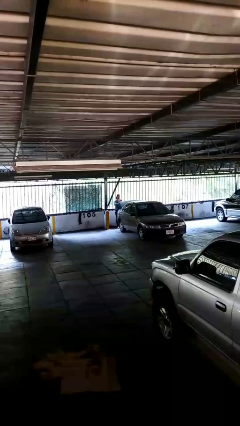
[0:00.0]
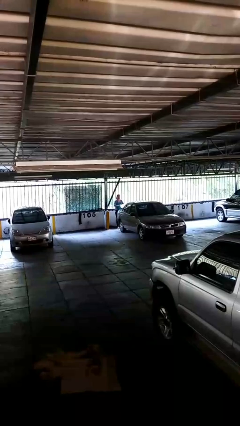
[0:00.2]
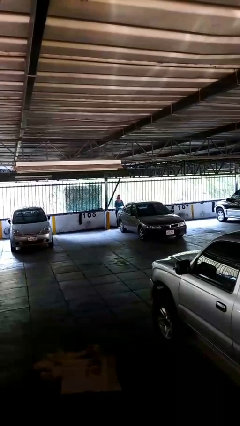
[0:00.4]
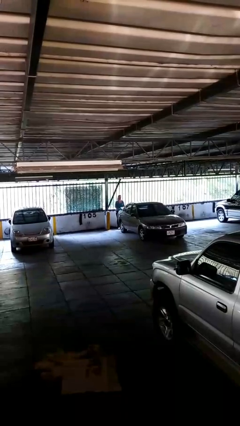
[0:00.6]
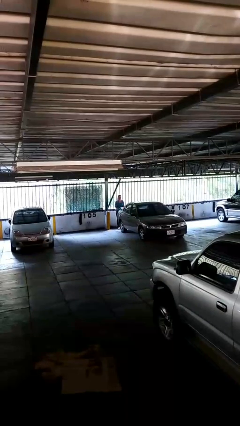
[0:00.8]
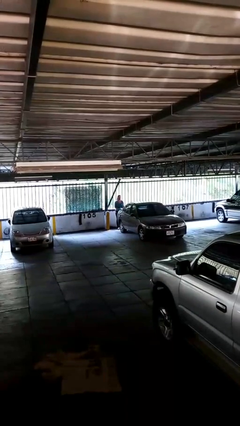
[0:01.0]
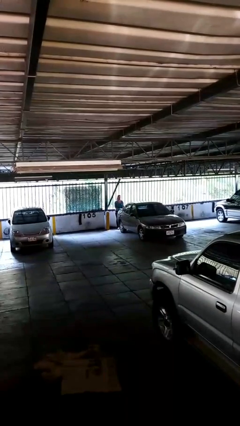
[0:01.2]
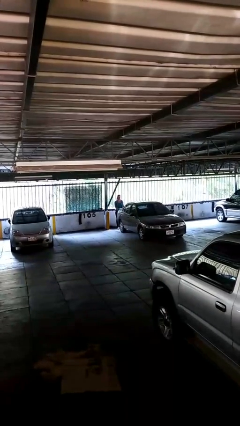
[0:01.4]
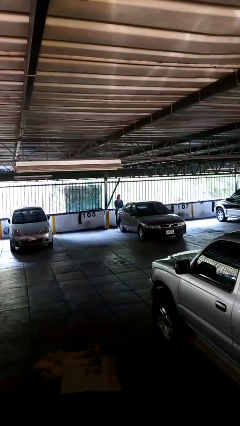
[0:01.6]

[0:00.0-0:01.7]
person closes car trunk

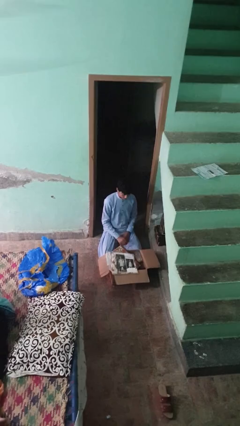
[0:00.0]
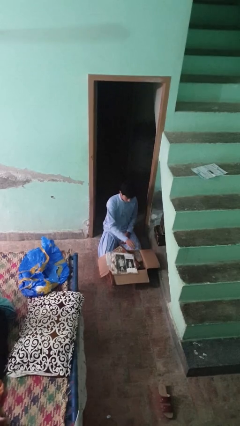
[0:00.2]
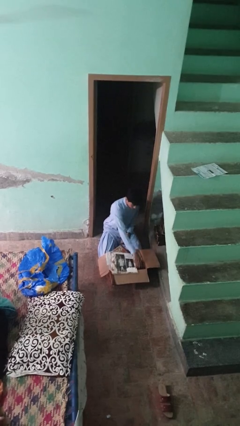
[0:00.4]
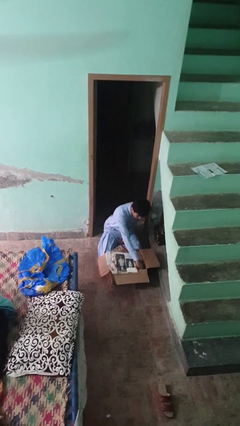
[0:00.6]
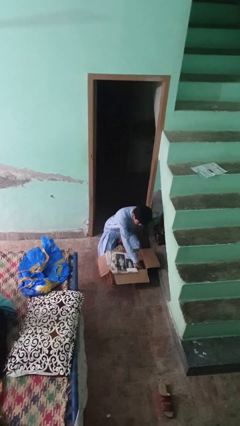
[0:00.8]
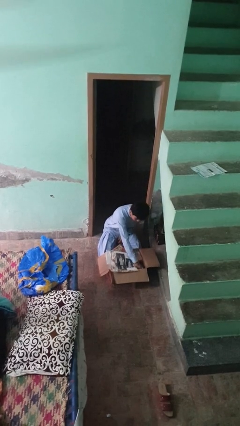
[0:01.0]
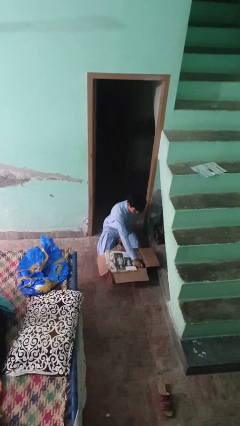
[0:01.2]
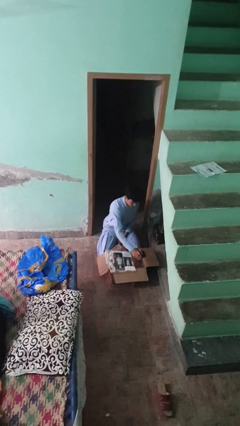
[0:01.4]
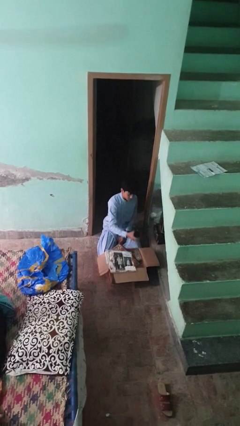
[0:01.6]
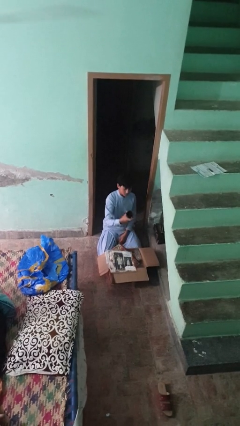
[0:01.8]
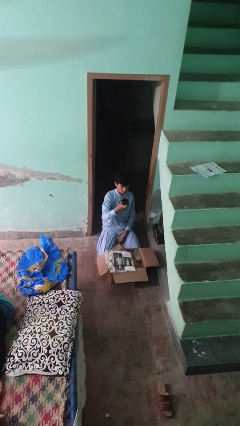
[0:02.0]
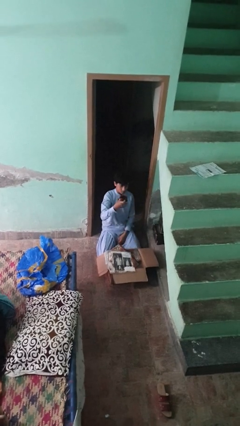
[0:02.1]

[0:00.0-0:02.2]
person takes object from box

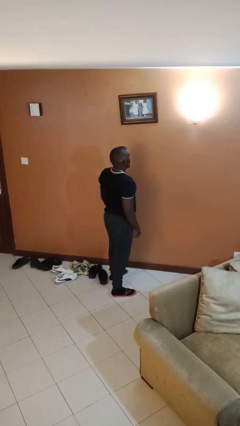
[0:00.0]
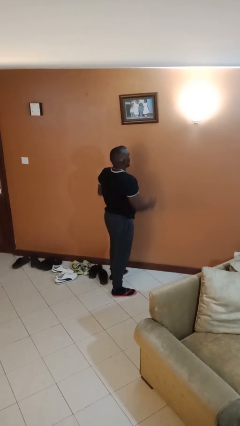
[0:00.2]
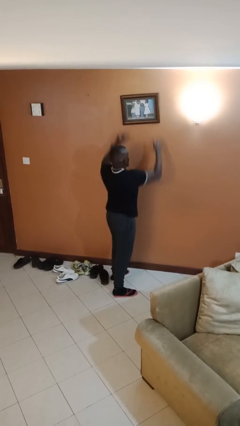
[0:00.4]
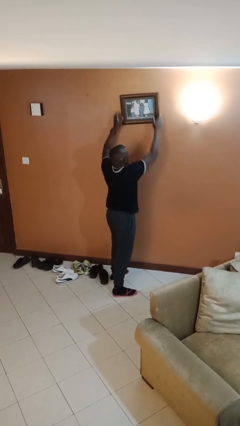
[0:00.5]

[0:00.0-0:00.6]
person takes down picture frame

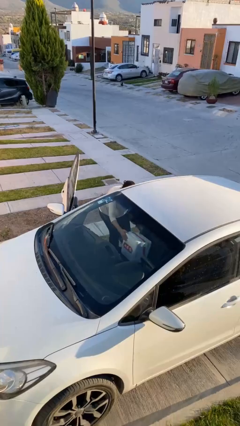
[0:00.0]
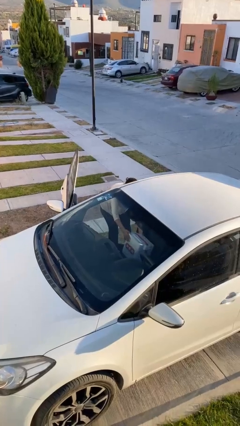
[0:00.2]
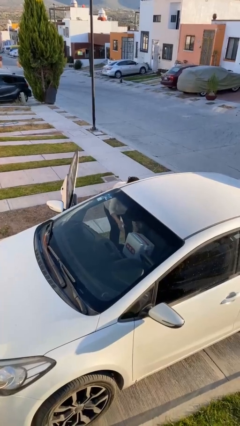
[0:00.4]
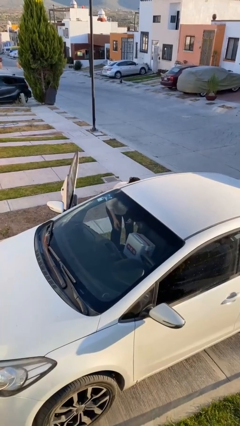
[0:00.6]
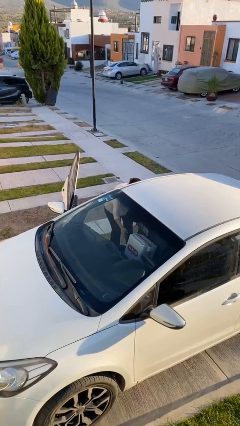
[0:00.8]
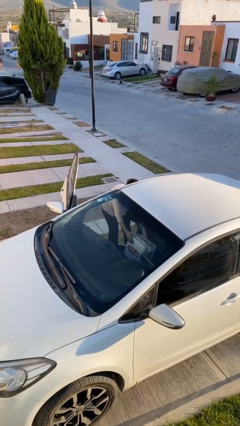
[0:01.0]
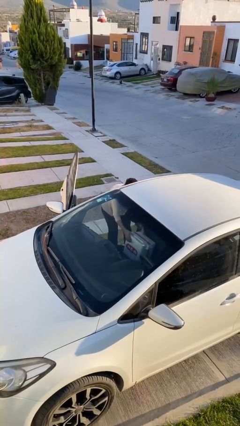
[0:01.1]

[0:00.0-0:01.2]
person loads car

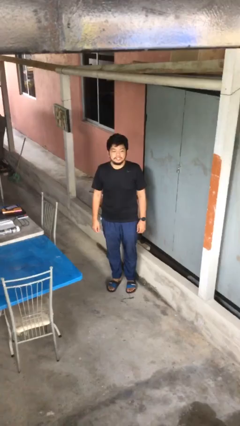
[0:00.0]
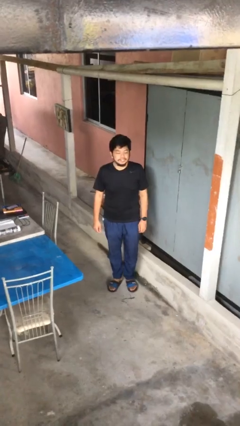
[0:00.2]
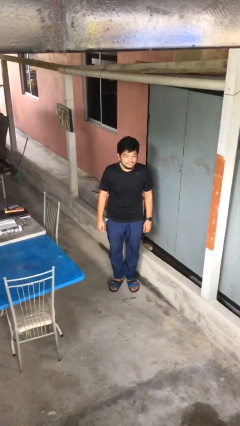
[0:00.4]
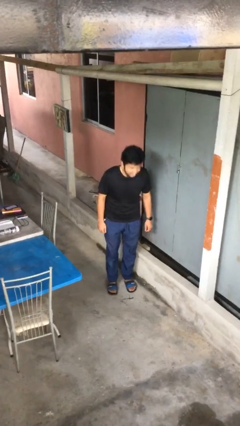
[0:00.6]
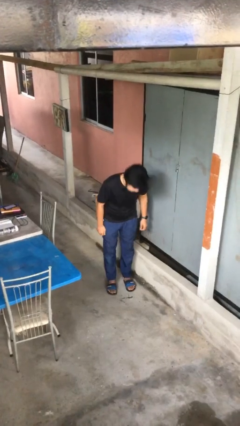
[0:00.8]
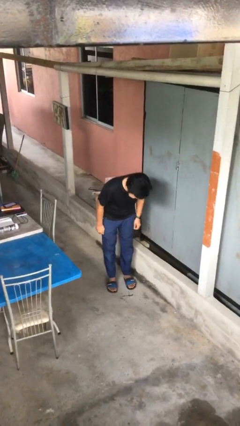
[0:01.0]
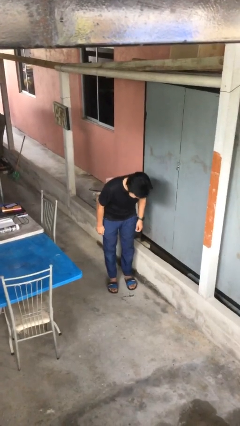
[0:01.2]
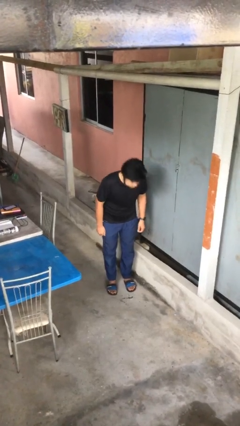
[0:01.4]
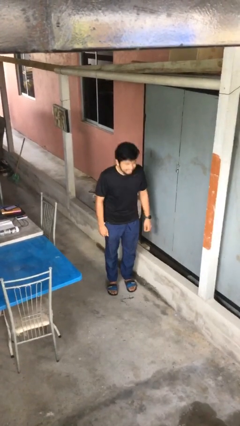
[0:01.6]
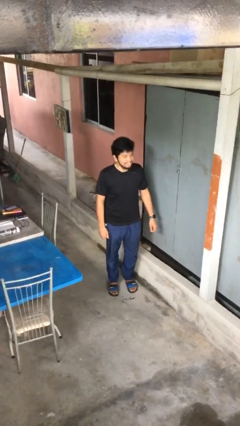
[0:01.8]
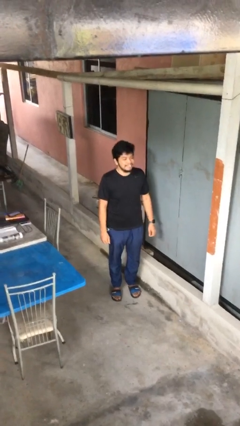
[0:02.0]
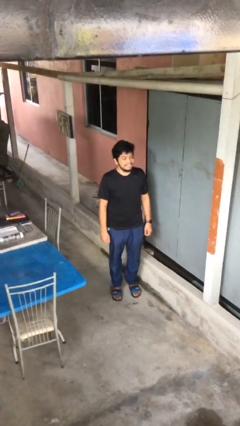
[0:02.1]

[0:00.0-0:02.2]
person bows

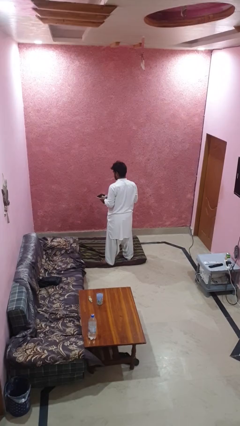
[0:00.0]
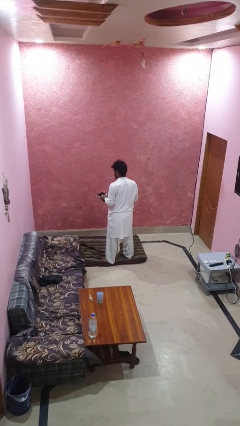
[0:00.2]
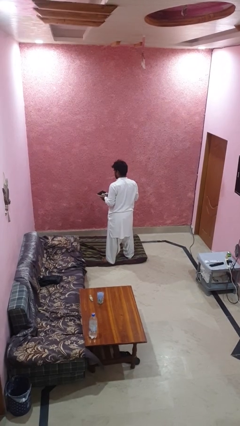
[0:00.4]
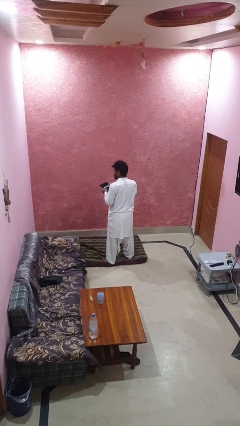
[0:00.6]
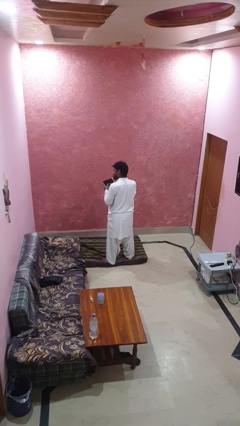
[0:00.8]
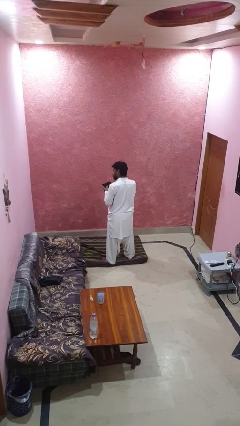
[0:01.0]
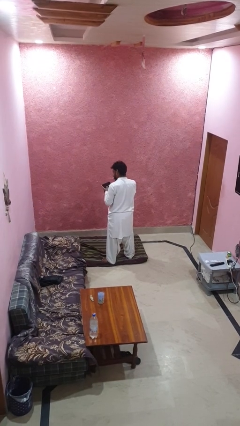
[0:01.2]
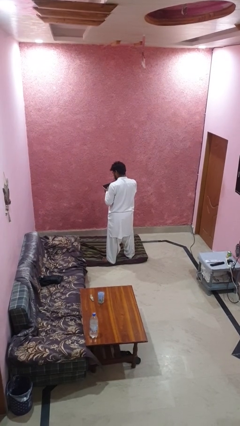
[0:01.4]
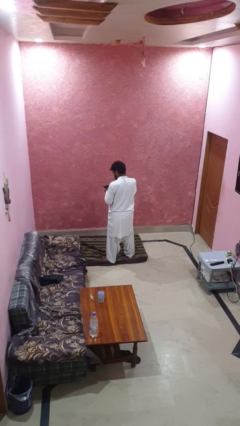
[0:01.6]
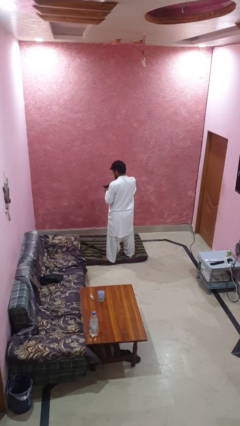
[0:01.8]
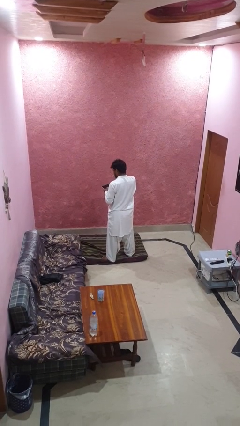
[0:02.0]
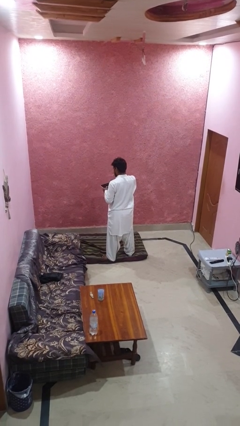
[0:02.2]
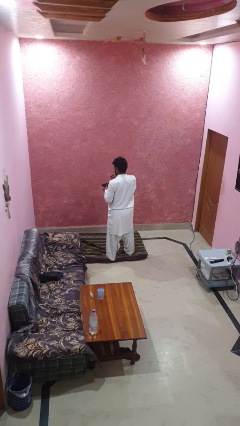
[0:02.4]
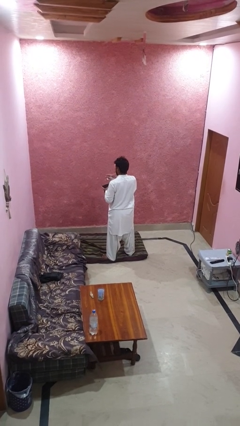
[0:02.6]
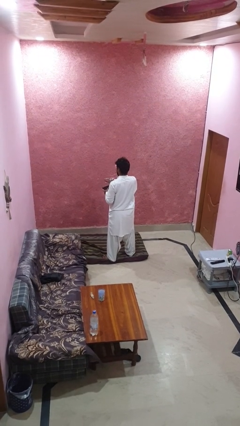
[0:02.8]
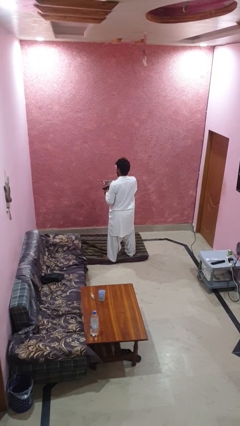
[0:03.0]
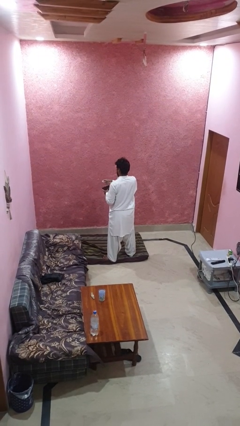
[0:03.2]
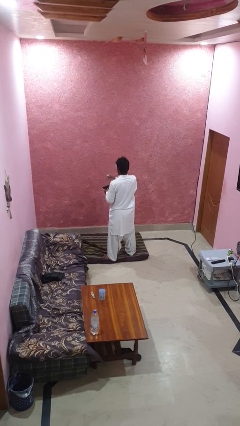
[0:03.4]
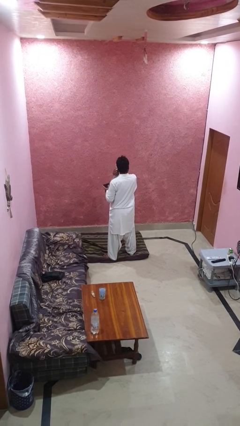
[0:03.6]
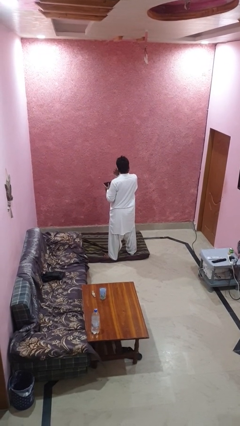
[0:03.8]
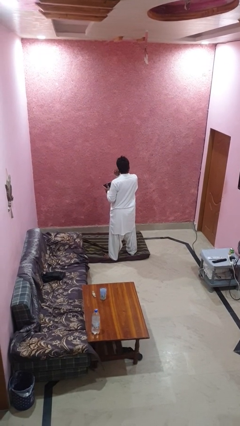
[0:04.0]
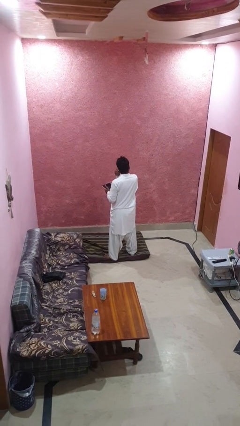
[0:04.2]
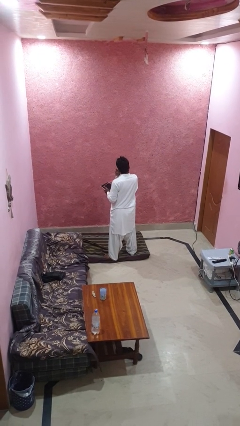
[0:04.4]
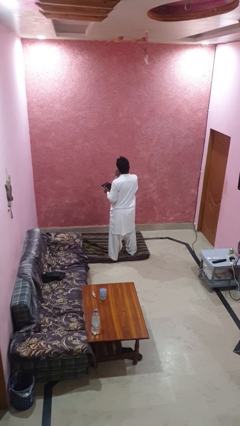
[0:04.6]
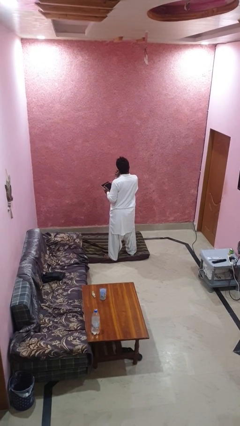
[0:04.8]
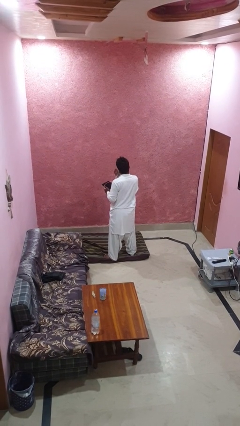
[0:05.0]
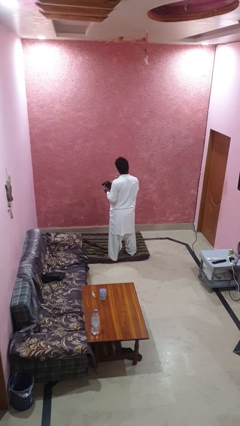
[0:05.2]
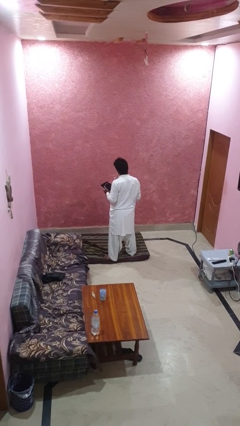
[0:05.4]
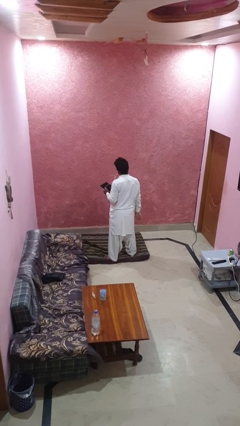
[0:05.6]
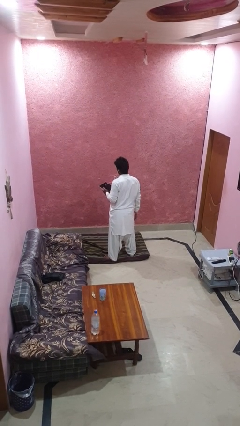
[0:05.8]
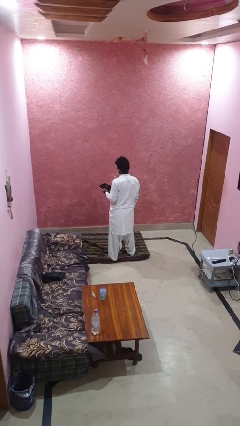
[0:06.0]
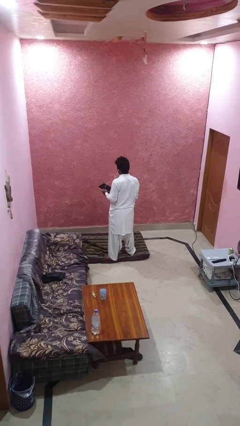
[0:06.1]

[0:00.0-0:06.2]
person puts on headphones

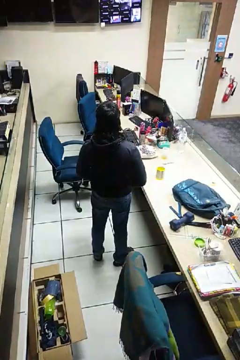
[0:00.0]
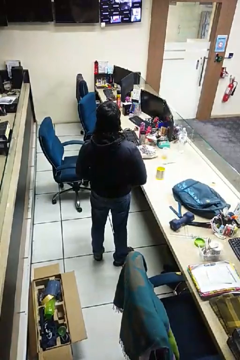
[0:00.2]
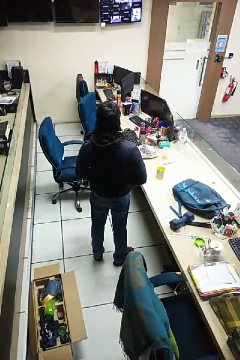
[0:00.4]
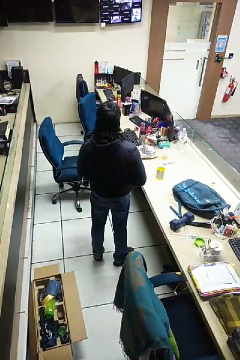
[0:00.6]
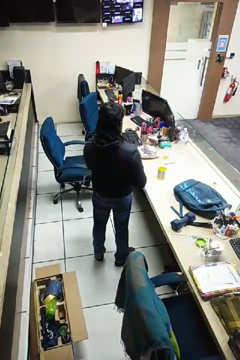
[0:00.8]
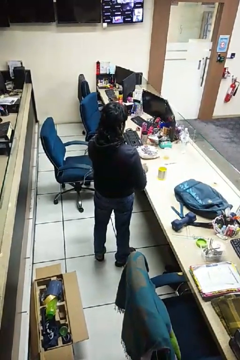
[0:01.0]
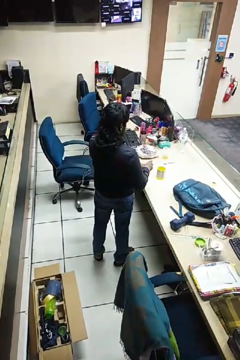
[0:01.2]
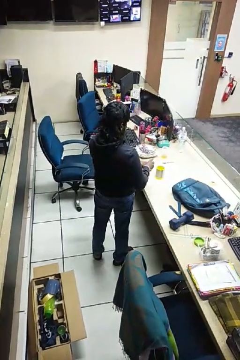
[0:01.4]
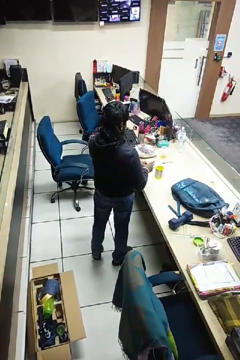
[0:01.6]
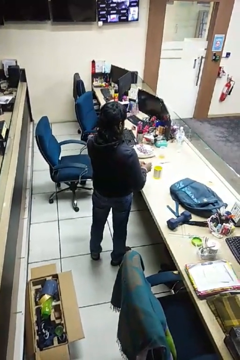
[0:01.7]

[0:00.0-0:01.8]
person opens beverage can

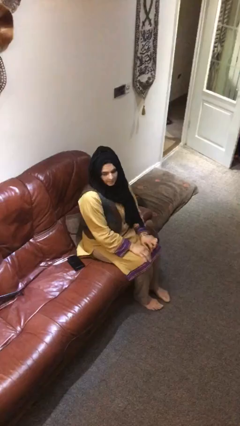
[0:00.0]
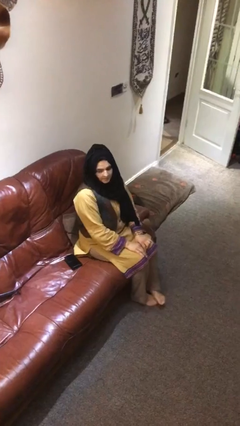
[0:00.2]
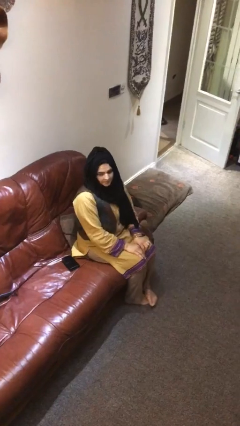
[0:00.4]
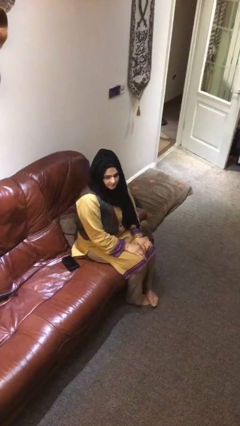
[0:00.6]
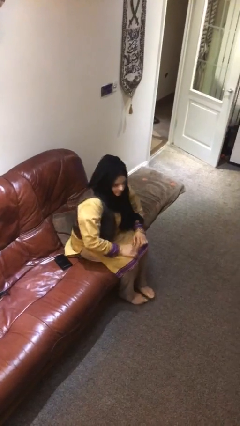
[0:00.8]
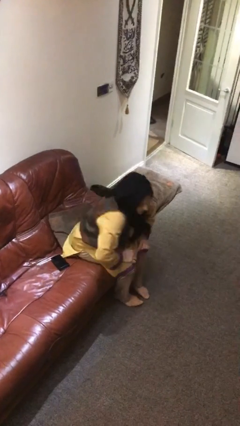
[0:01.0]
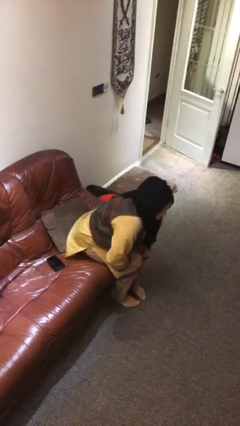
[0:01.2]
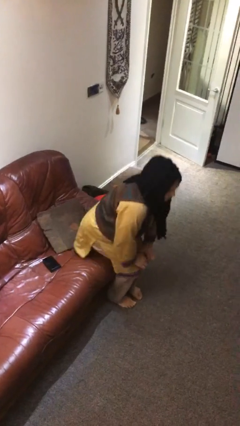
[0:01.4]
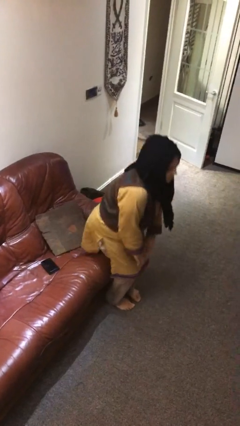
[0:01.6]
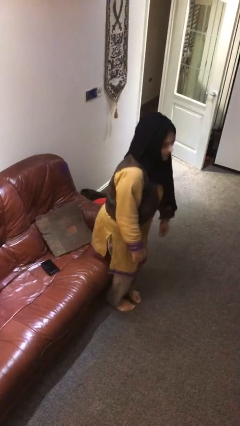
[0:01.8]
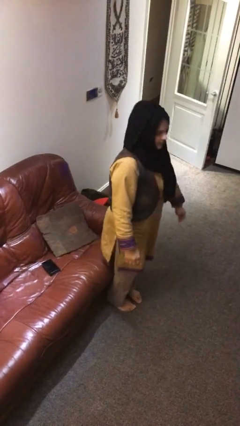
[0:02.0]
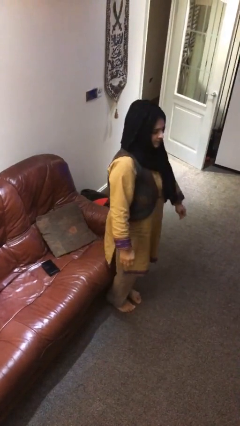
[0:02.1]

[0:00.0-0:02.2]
person stands up
